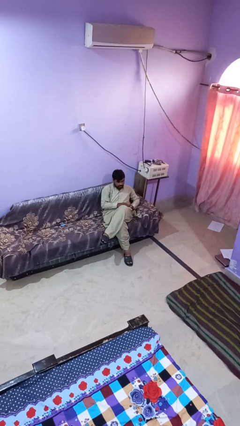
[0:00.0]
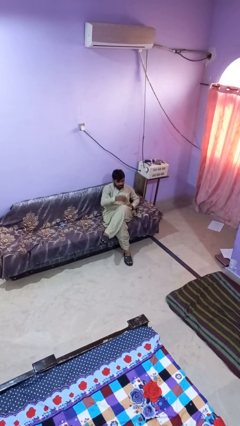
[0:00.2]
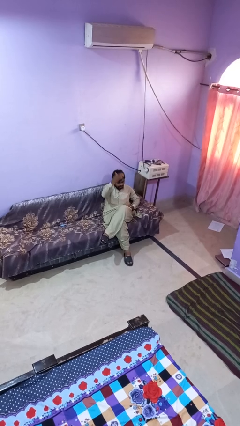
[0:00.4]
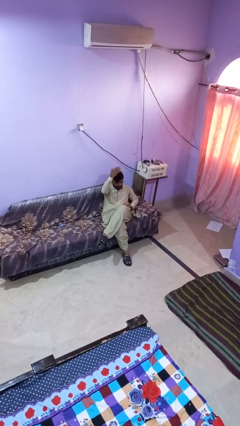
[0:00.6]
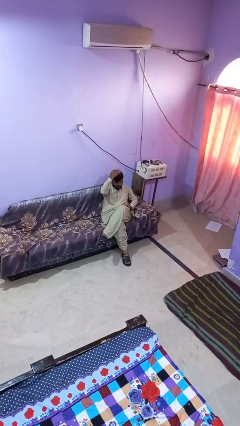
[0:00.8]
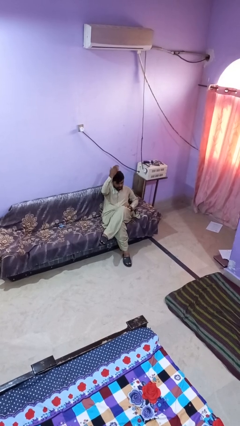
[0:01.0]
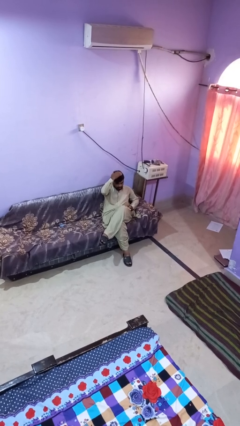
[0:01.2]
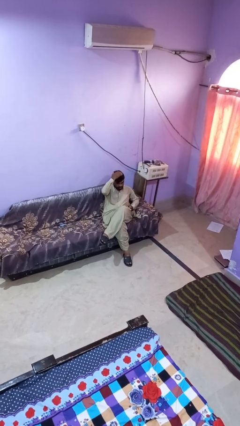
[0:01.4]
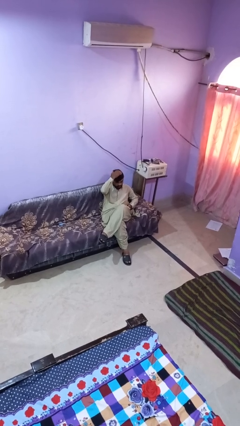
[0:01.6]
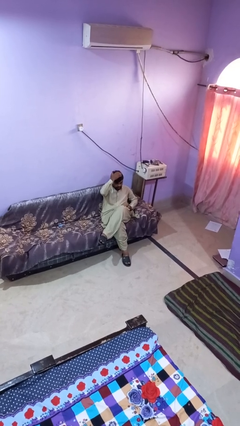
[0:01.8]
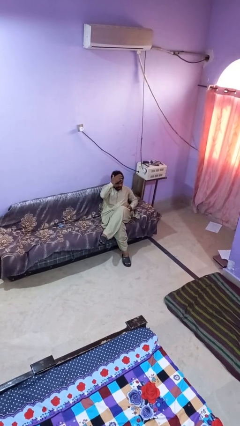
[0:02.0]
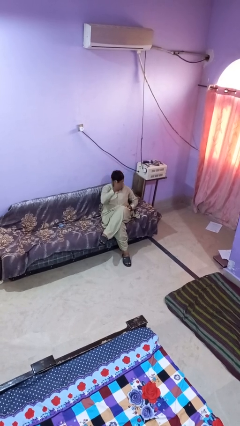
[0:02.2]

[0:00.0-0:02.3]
person pats head

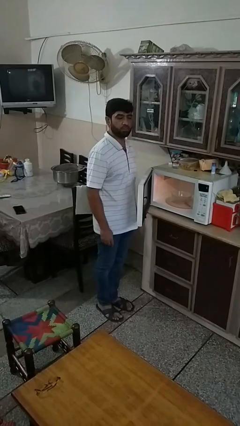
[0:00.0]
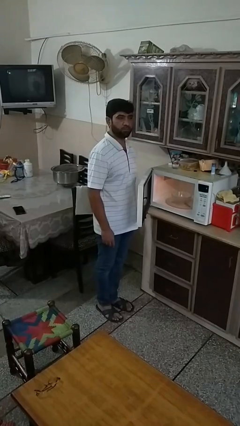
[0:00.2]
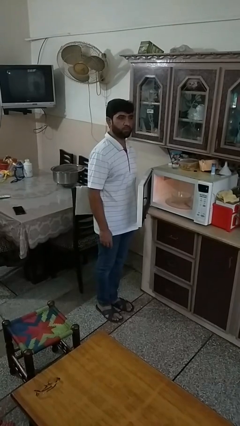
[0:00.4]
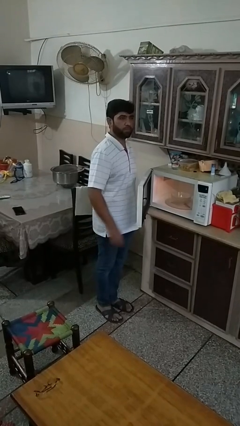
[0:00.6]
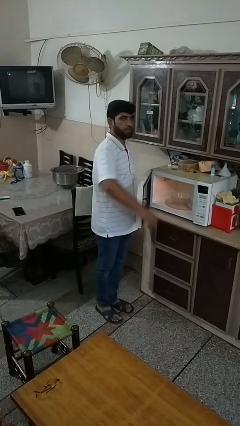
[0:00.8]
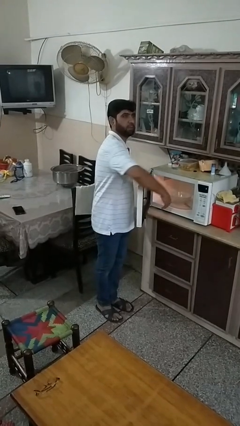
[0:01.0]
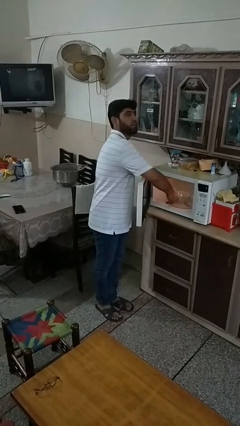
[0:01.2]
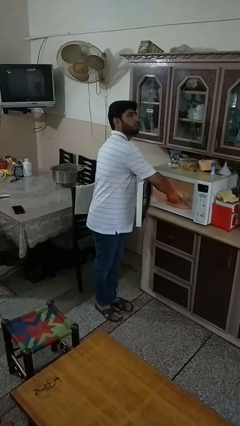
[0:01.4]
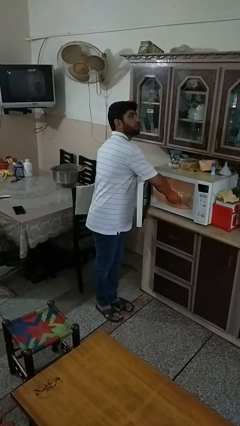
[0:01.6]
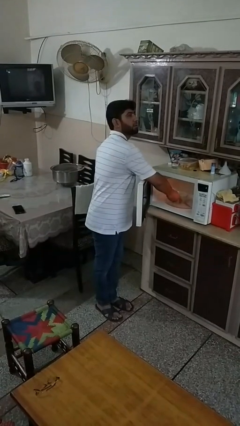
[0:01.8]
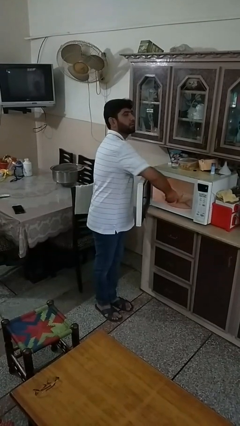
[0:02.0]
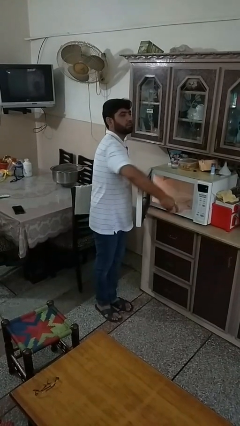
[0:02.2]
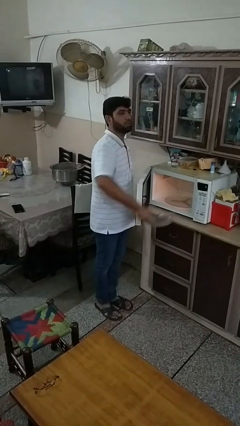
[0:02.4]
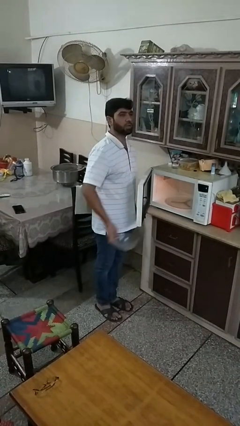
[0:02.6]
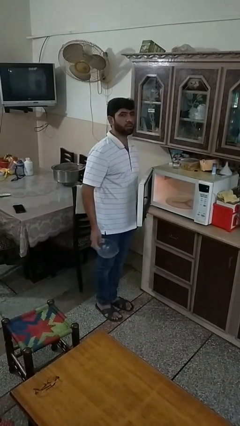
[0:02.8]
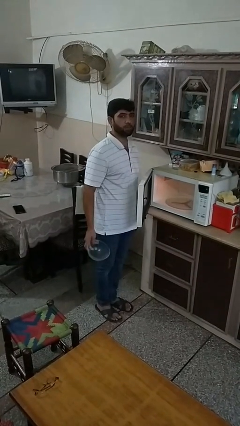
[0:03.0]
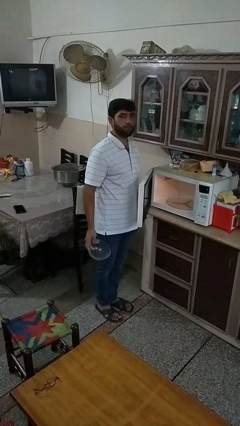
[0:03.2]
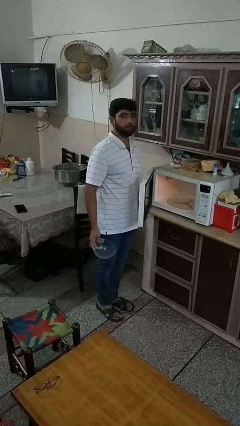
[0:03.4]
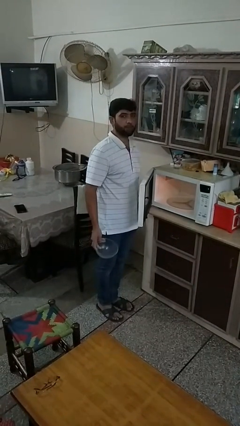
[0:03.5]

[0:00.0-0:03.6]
person takes object from microwave

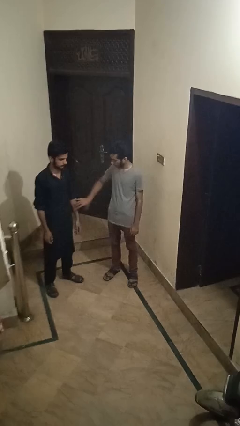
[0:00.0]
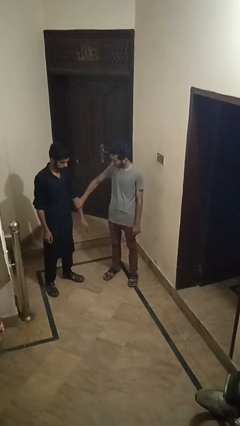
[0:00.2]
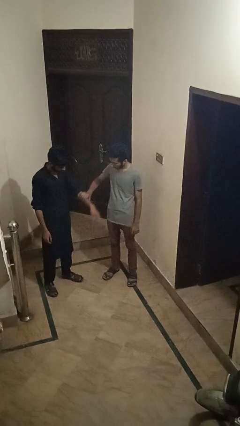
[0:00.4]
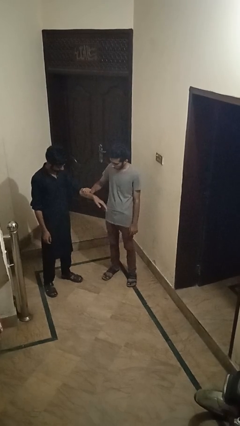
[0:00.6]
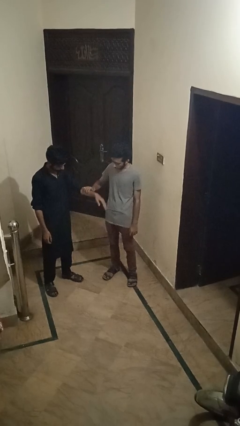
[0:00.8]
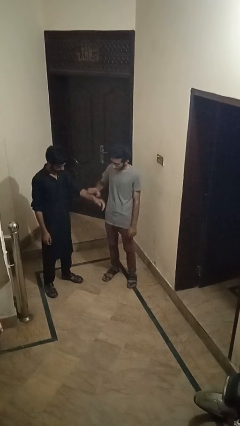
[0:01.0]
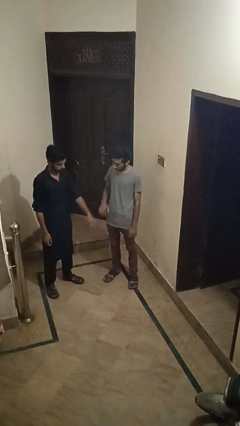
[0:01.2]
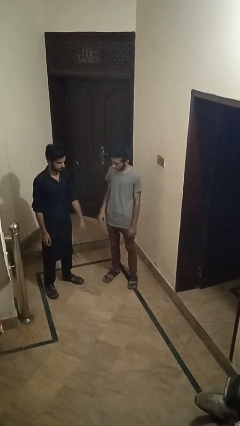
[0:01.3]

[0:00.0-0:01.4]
person grabs person by forearm

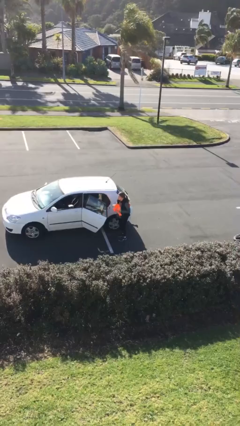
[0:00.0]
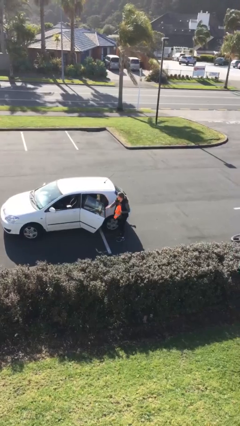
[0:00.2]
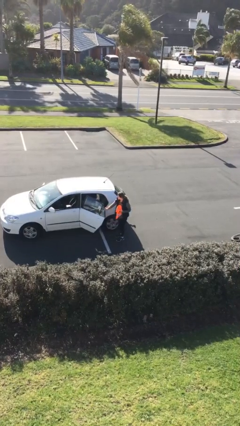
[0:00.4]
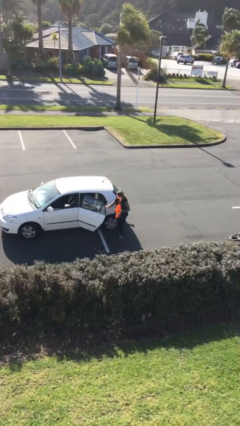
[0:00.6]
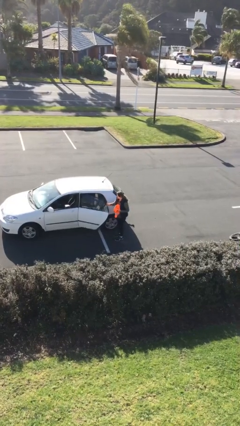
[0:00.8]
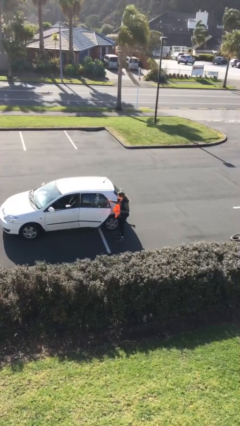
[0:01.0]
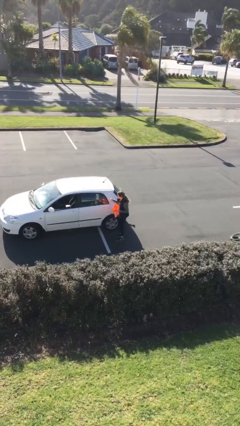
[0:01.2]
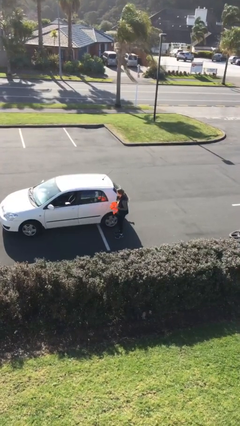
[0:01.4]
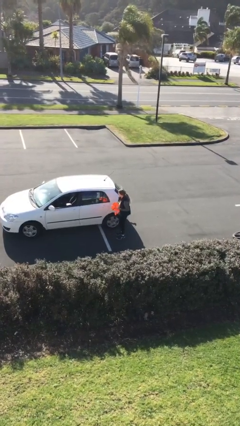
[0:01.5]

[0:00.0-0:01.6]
person closes car door

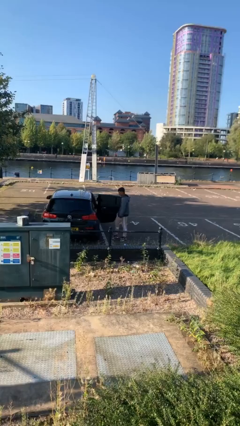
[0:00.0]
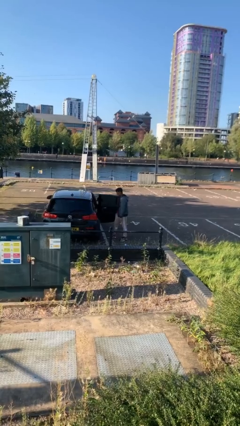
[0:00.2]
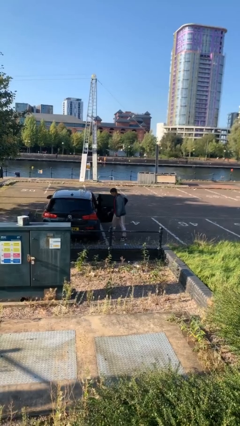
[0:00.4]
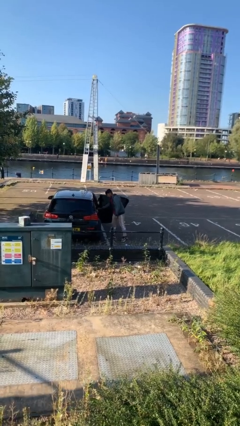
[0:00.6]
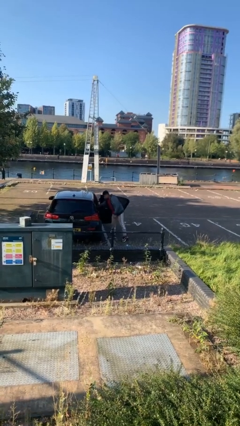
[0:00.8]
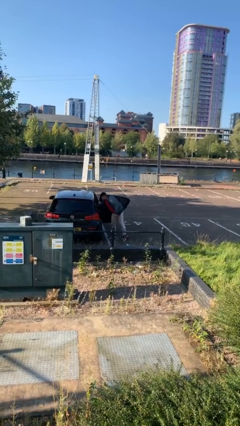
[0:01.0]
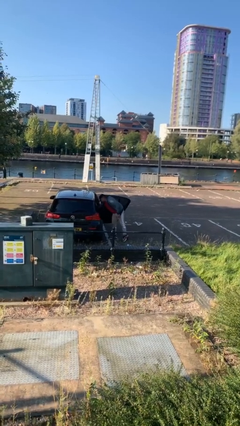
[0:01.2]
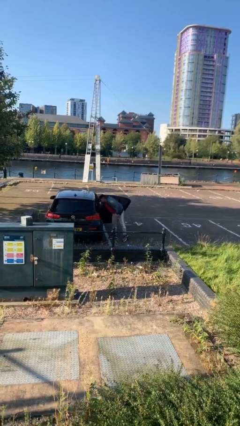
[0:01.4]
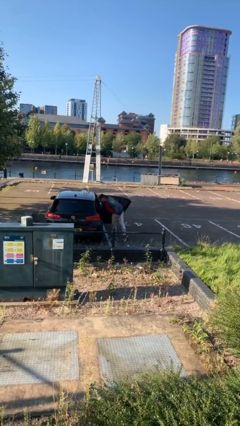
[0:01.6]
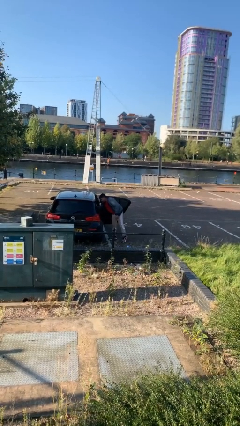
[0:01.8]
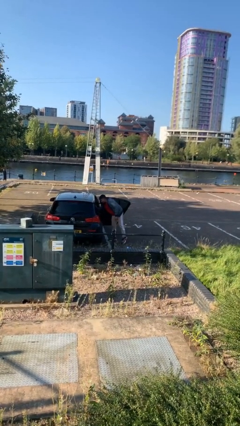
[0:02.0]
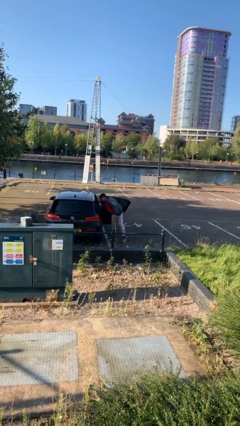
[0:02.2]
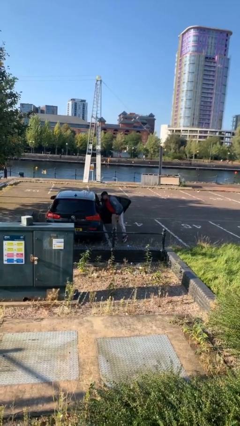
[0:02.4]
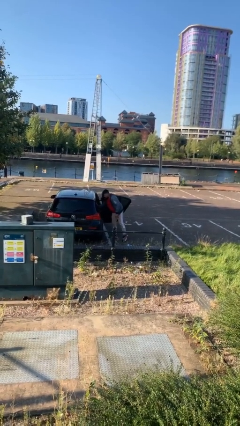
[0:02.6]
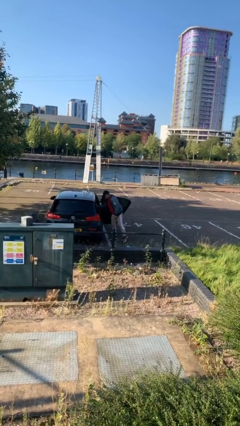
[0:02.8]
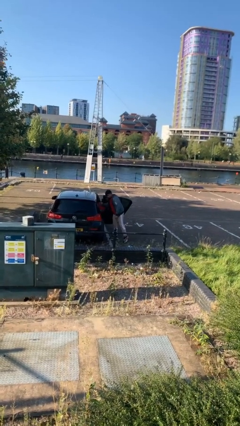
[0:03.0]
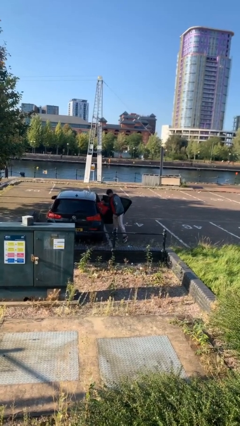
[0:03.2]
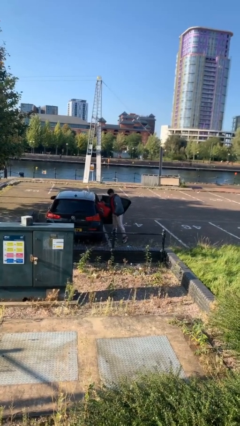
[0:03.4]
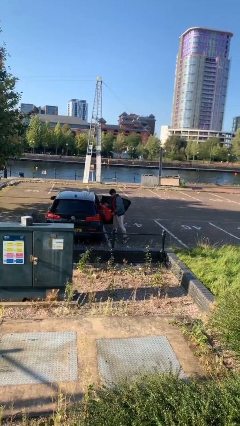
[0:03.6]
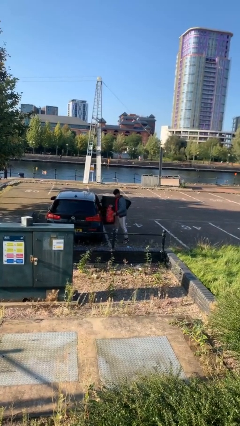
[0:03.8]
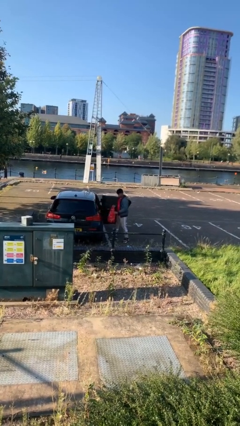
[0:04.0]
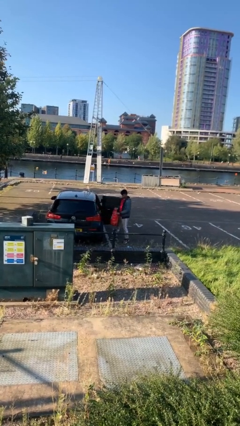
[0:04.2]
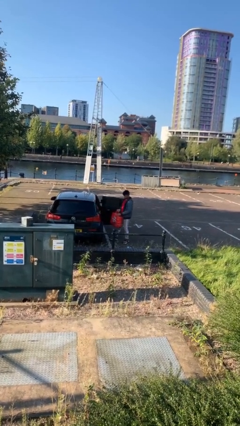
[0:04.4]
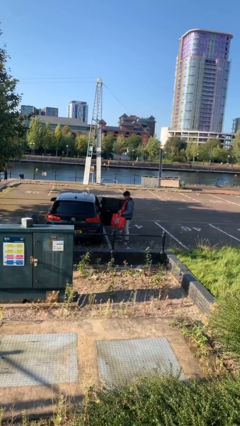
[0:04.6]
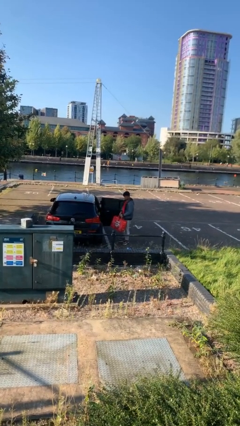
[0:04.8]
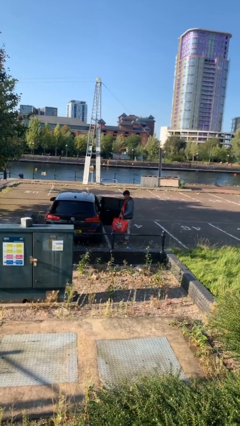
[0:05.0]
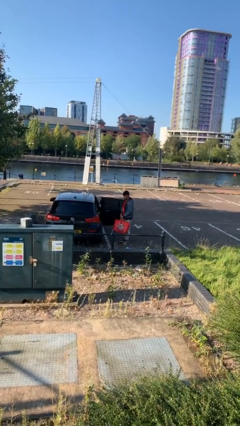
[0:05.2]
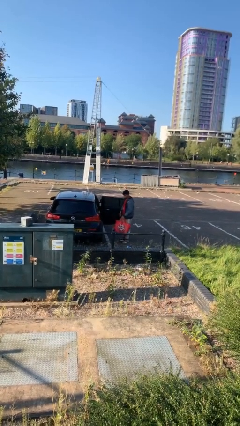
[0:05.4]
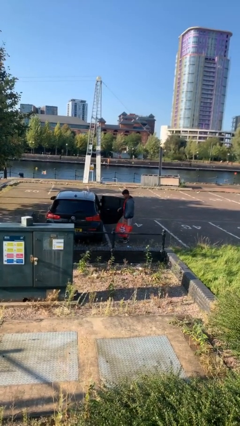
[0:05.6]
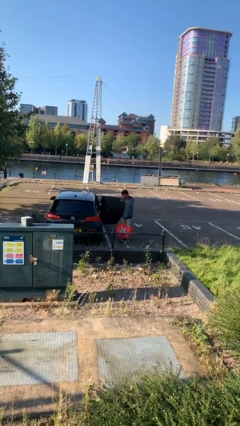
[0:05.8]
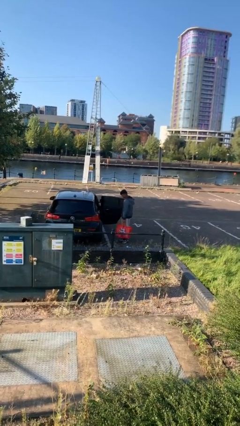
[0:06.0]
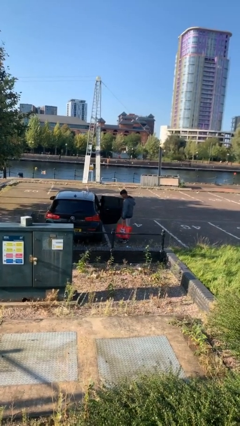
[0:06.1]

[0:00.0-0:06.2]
person unloads car

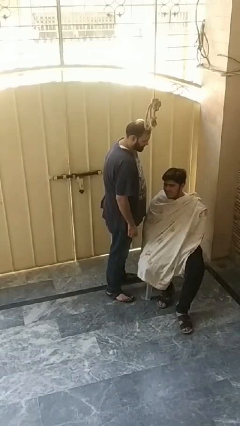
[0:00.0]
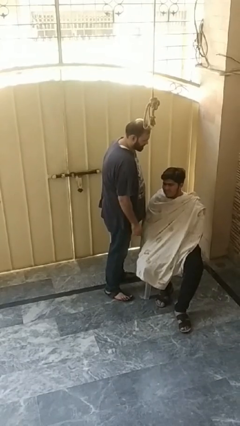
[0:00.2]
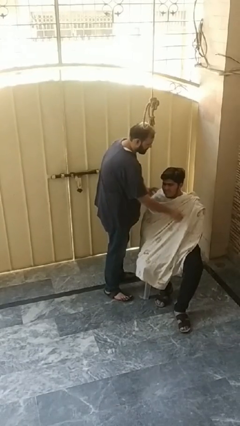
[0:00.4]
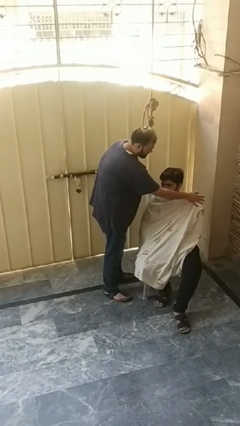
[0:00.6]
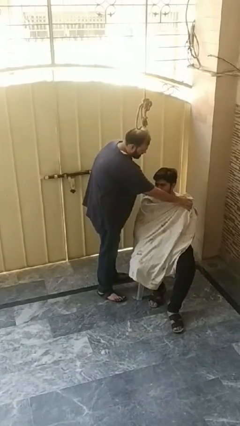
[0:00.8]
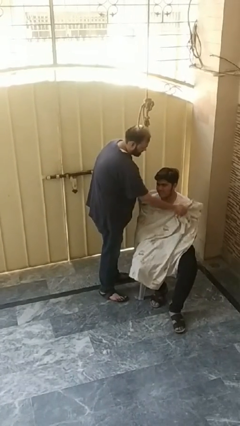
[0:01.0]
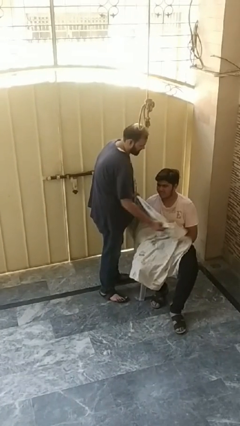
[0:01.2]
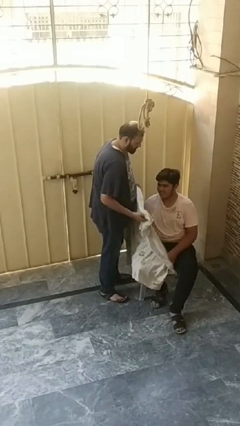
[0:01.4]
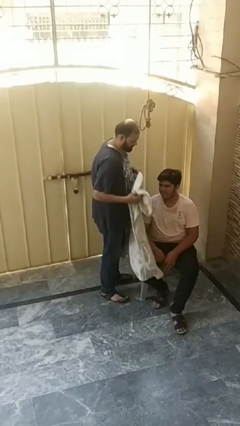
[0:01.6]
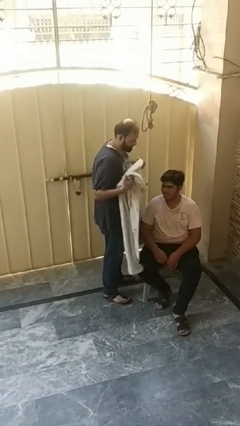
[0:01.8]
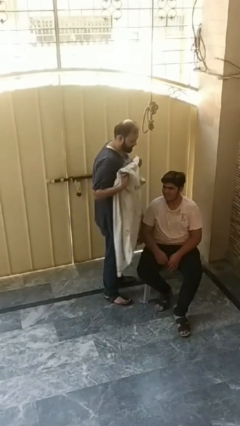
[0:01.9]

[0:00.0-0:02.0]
person uncovers friend with blanket

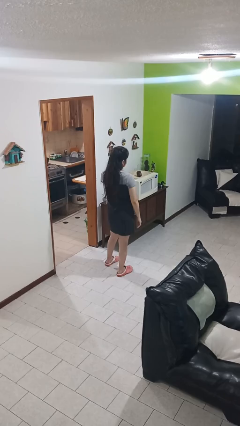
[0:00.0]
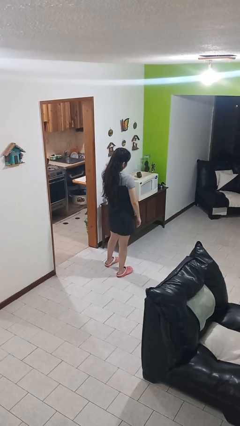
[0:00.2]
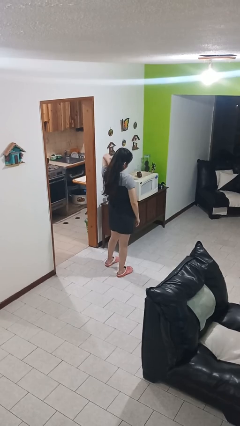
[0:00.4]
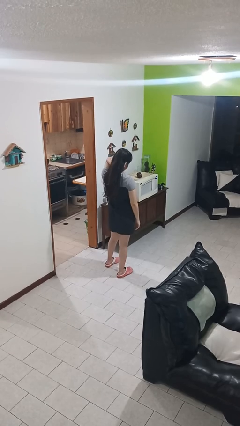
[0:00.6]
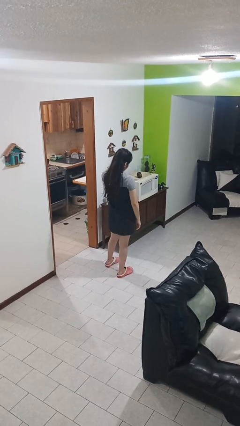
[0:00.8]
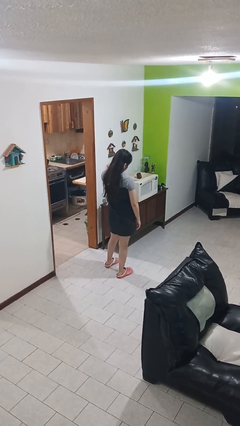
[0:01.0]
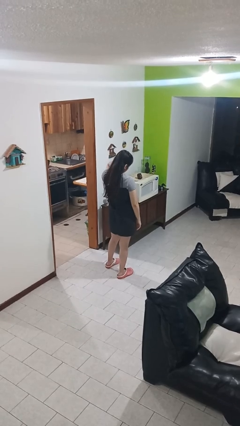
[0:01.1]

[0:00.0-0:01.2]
person rubs neck
